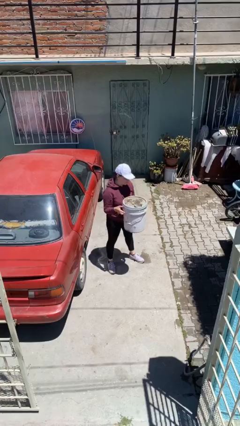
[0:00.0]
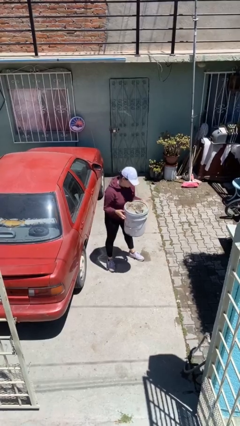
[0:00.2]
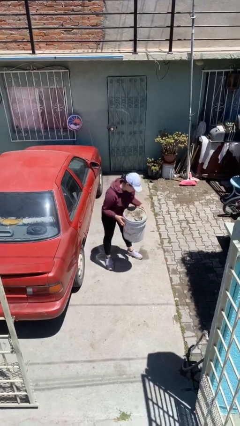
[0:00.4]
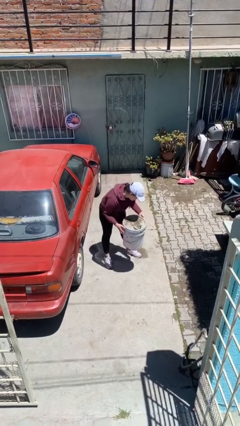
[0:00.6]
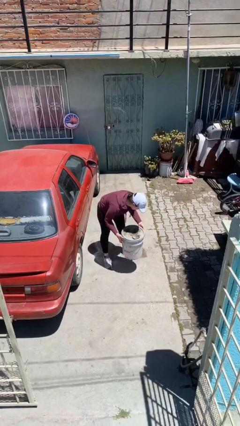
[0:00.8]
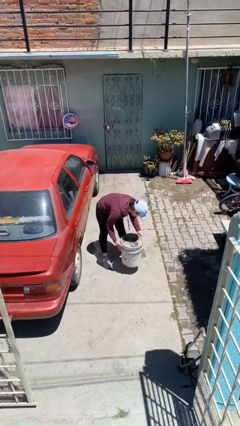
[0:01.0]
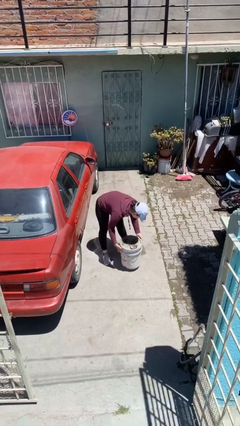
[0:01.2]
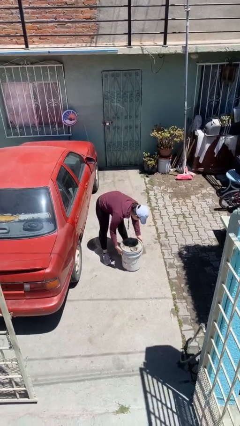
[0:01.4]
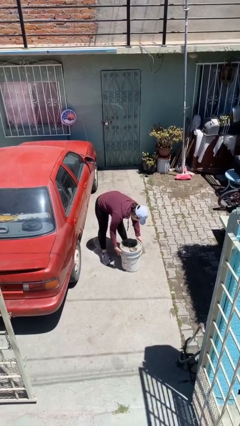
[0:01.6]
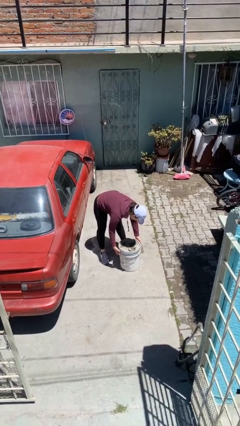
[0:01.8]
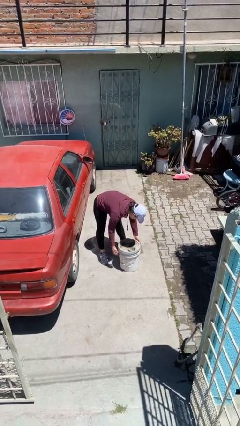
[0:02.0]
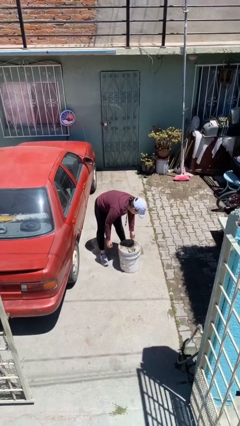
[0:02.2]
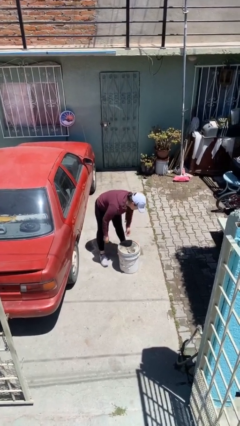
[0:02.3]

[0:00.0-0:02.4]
person puts down object on floor

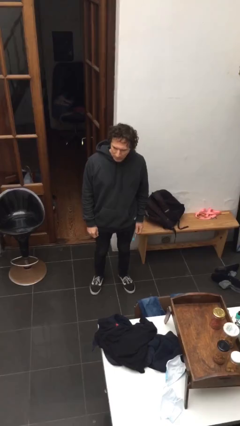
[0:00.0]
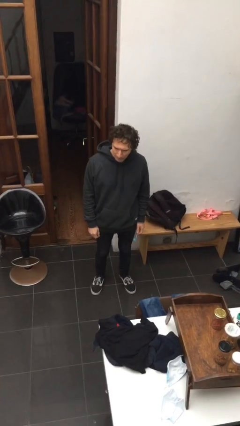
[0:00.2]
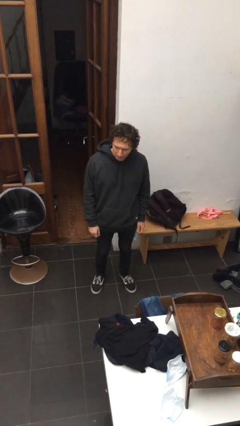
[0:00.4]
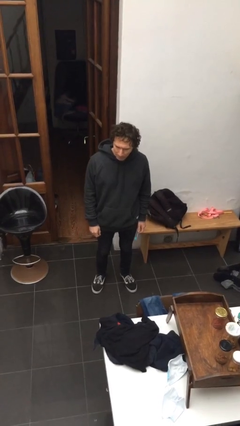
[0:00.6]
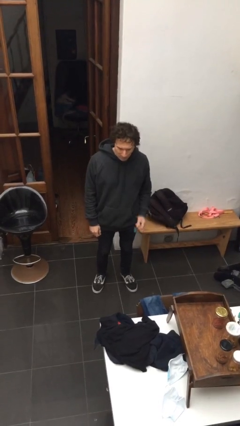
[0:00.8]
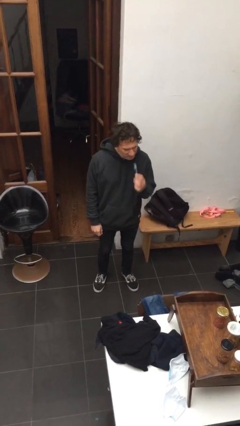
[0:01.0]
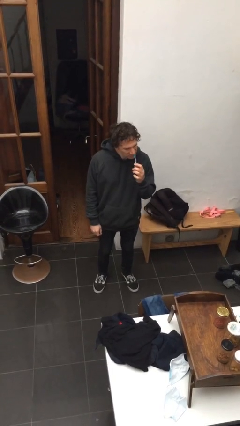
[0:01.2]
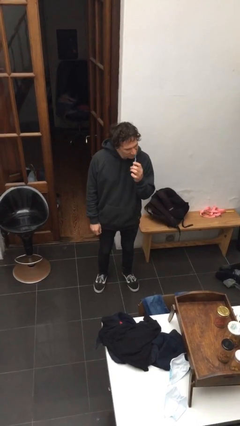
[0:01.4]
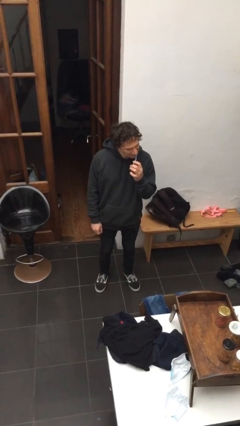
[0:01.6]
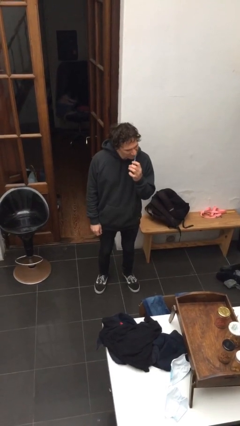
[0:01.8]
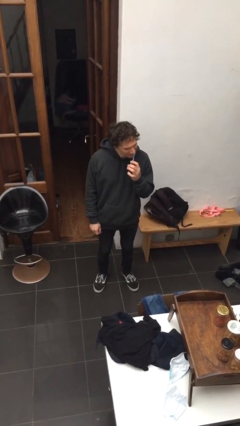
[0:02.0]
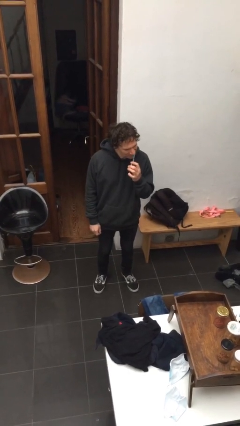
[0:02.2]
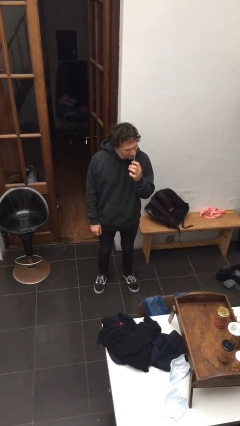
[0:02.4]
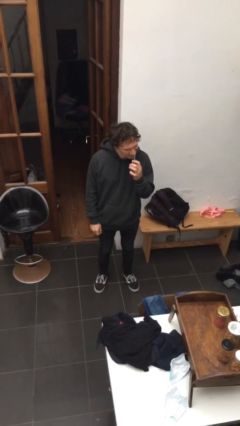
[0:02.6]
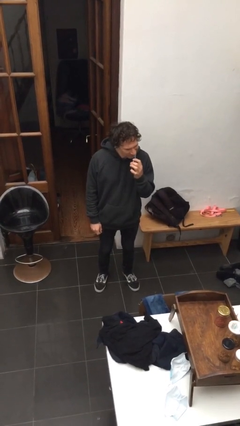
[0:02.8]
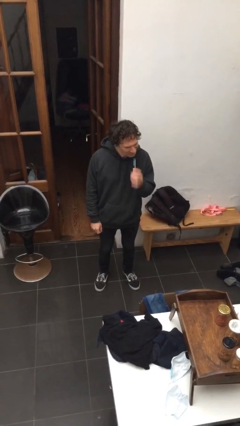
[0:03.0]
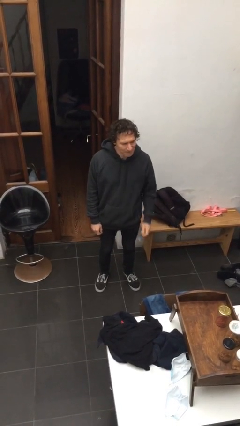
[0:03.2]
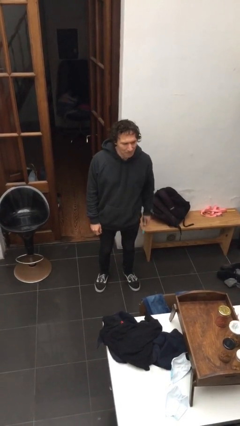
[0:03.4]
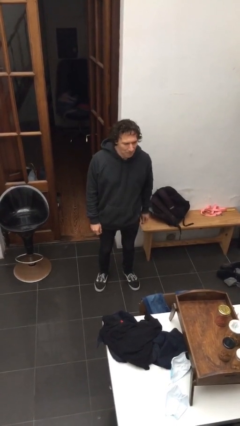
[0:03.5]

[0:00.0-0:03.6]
person flosses

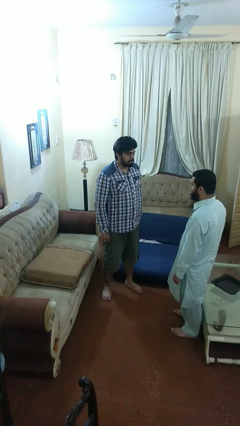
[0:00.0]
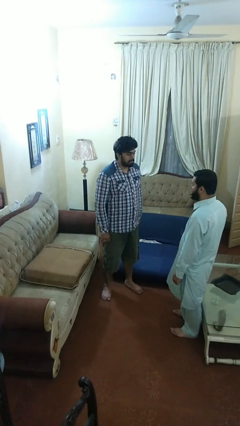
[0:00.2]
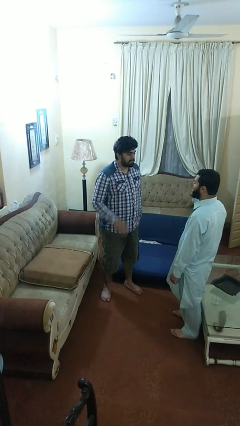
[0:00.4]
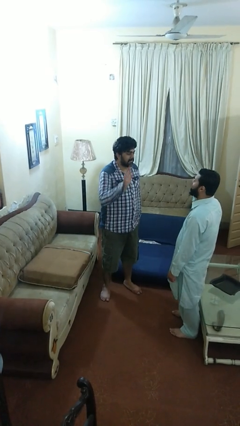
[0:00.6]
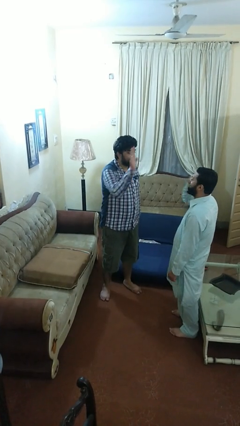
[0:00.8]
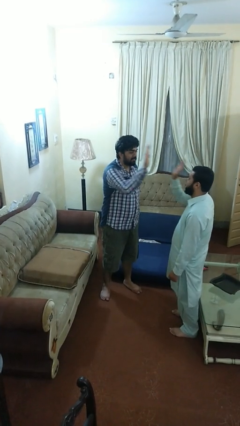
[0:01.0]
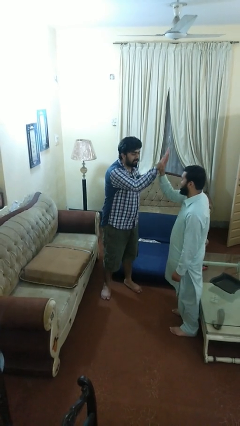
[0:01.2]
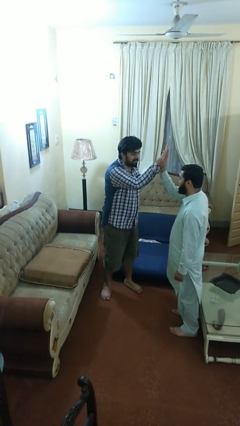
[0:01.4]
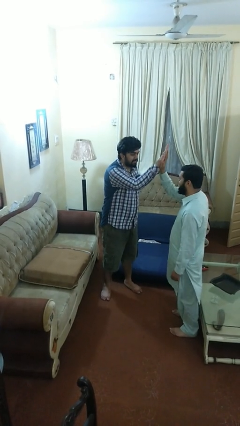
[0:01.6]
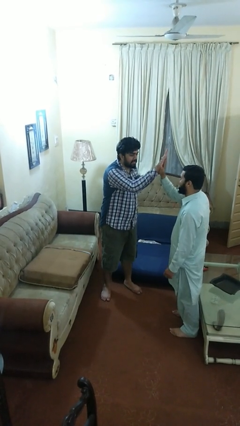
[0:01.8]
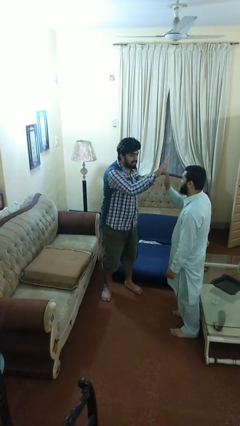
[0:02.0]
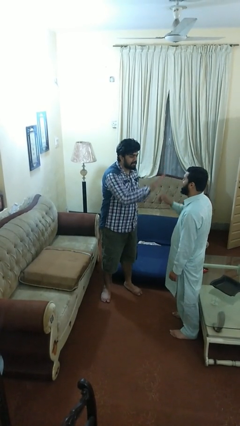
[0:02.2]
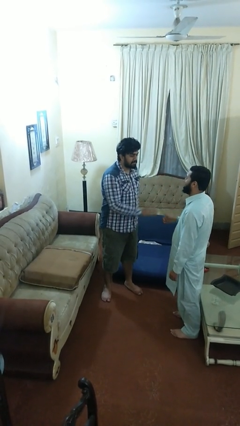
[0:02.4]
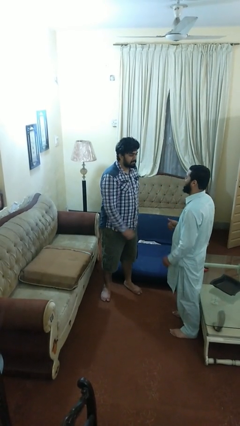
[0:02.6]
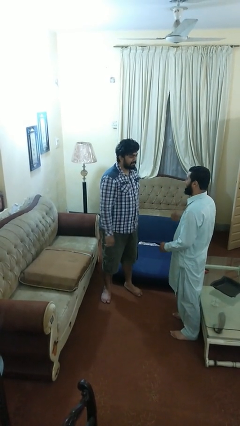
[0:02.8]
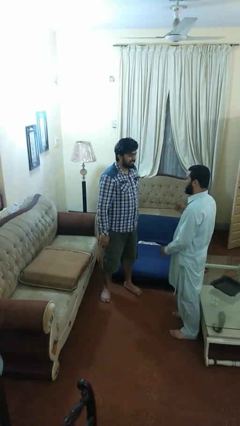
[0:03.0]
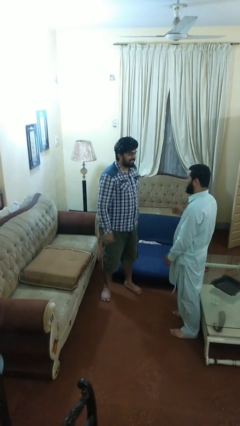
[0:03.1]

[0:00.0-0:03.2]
person highfives hand

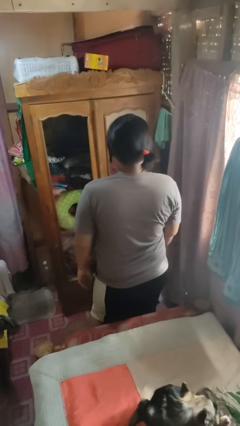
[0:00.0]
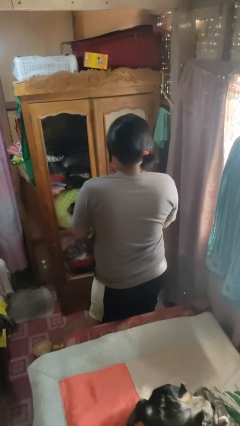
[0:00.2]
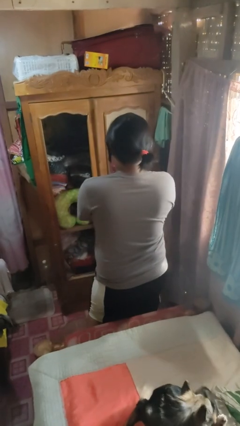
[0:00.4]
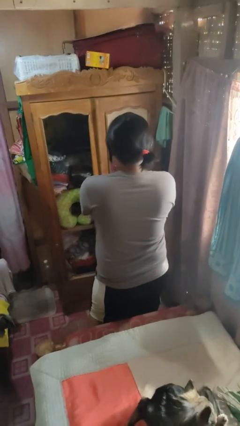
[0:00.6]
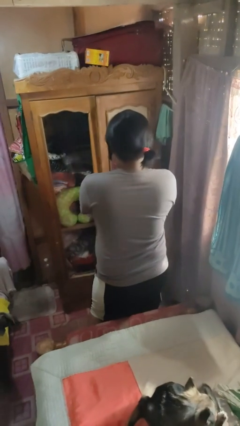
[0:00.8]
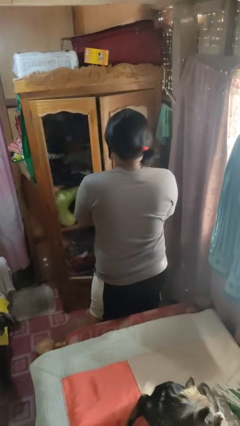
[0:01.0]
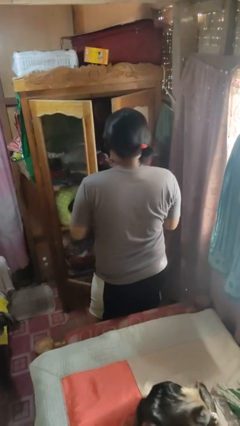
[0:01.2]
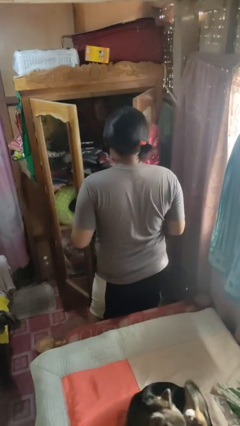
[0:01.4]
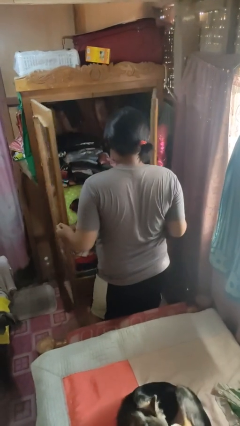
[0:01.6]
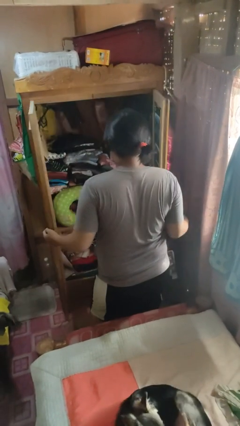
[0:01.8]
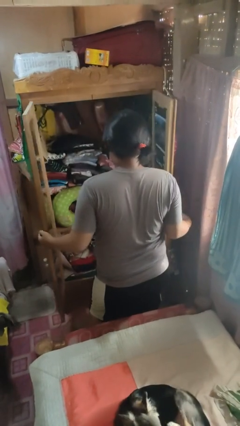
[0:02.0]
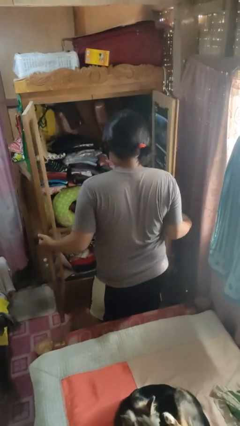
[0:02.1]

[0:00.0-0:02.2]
person opens closet door

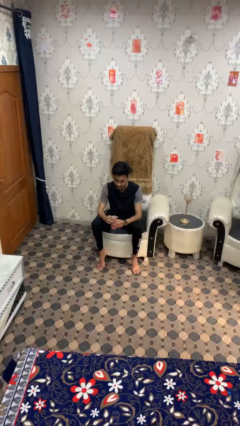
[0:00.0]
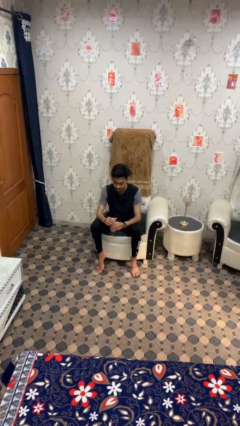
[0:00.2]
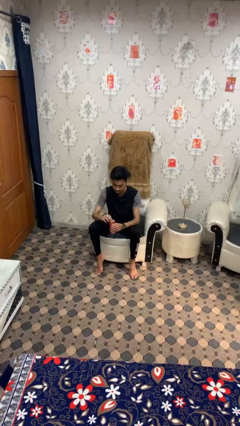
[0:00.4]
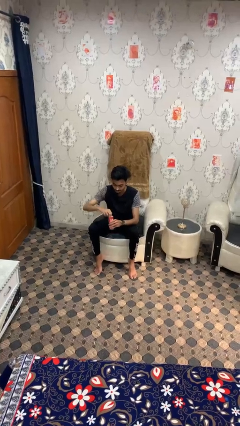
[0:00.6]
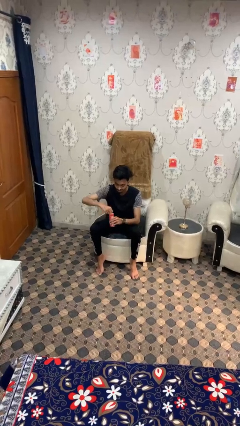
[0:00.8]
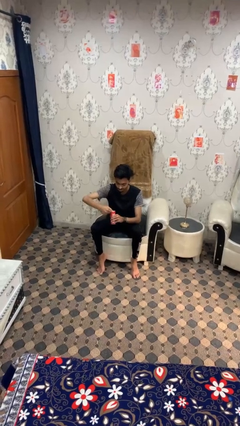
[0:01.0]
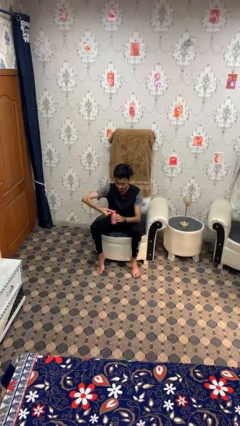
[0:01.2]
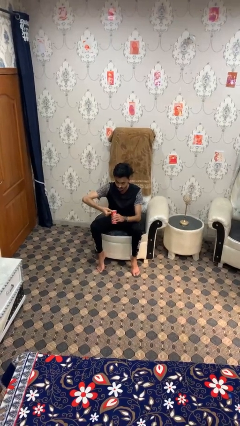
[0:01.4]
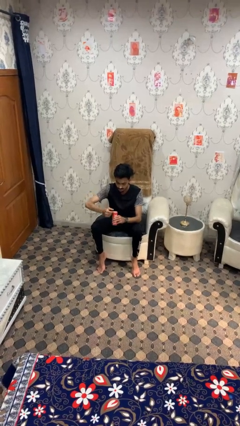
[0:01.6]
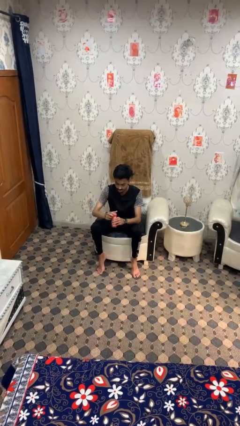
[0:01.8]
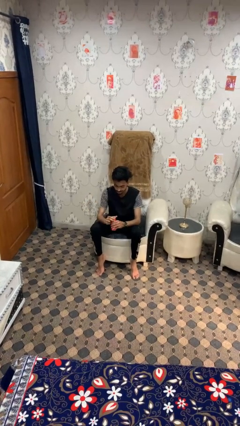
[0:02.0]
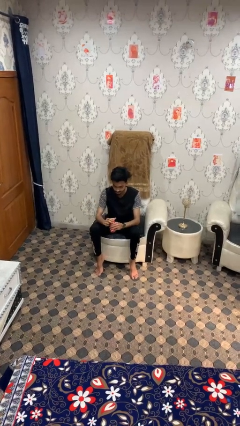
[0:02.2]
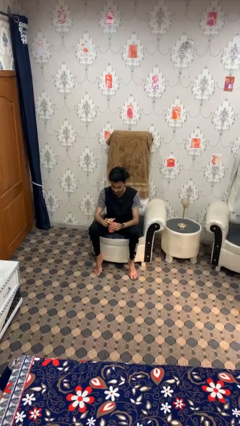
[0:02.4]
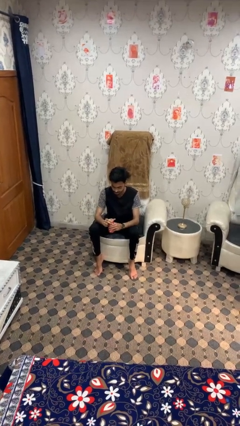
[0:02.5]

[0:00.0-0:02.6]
person opens beverage can

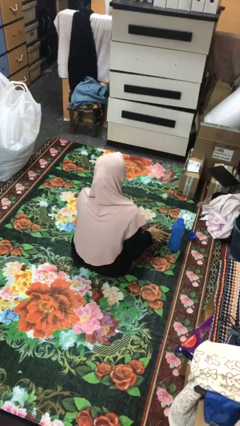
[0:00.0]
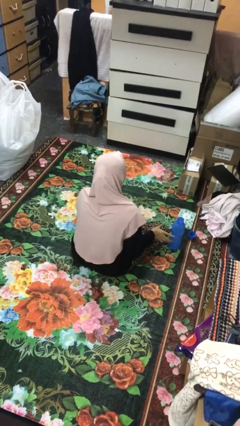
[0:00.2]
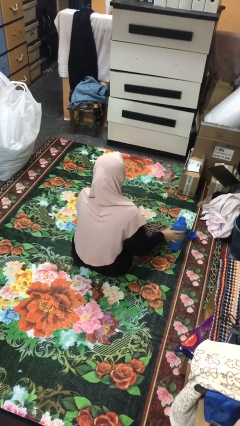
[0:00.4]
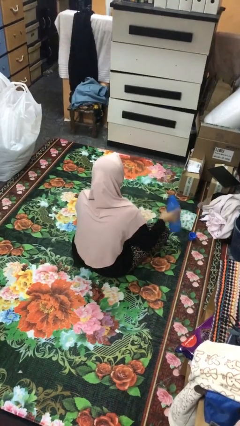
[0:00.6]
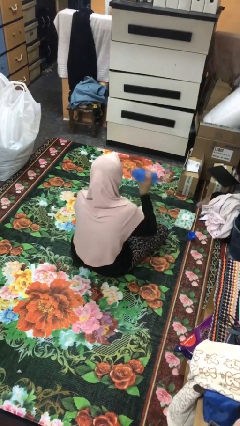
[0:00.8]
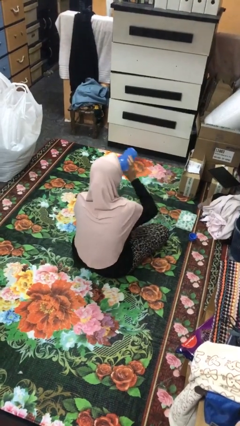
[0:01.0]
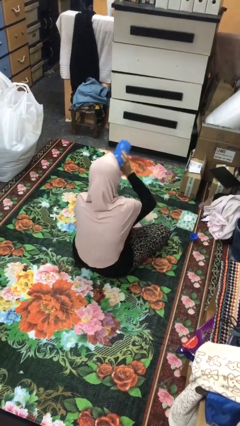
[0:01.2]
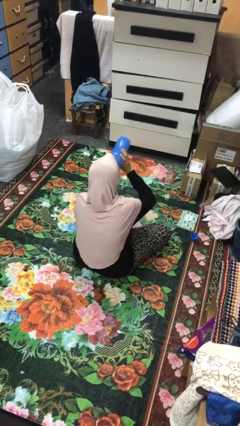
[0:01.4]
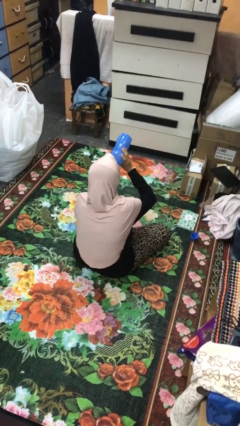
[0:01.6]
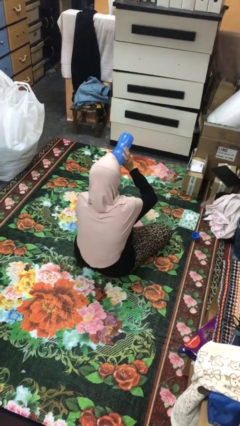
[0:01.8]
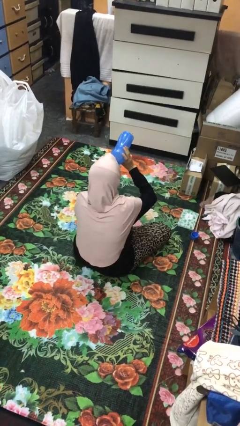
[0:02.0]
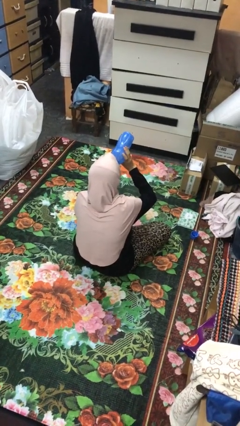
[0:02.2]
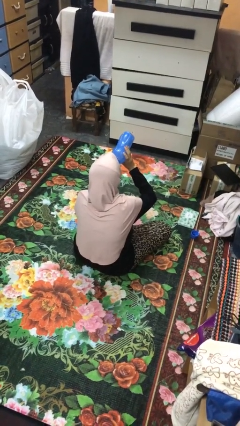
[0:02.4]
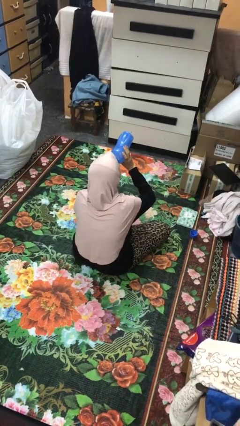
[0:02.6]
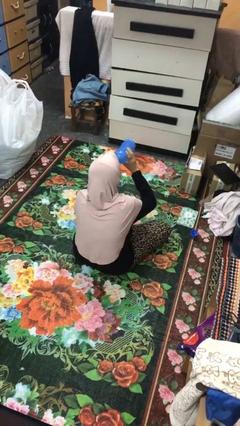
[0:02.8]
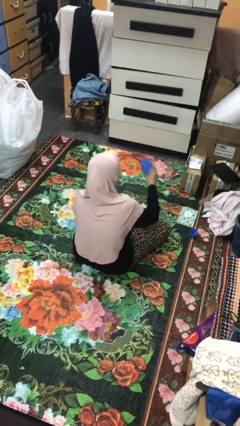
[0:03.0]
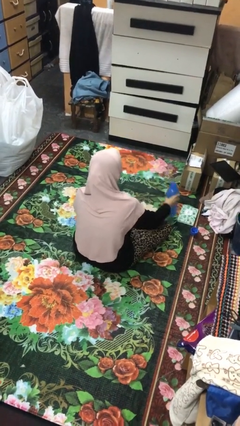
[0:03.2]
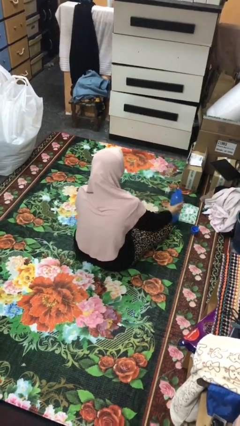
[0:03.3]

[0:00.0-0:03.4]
person drinks from bottle

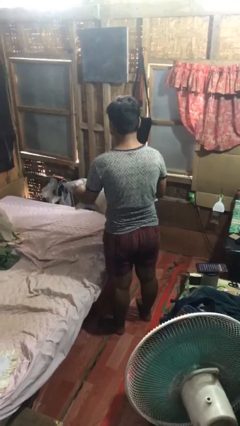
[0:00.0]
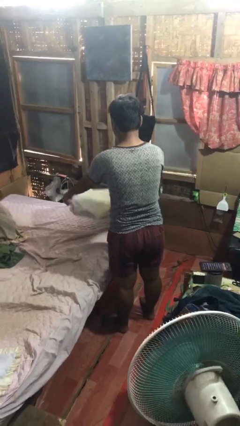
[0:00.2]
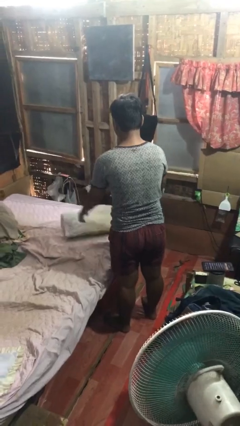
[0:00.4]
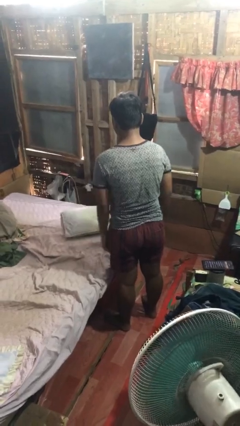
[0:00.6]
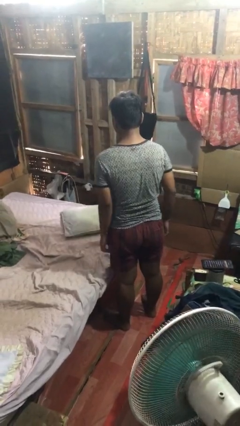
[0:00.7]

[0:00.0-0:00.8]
person puts down object on bed
